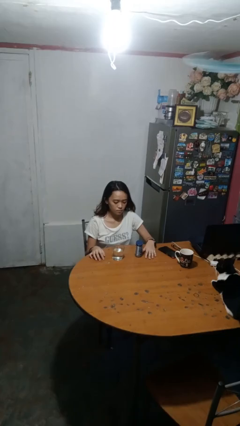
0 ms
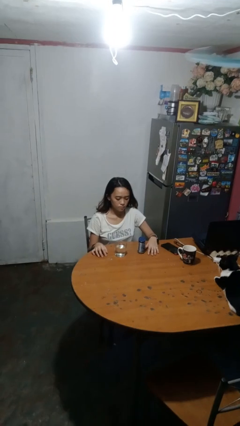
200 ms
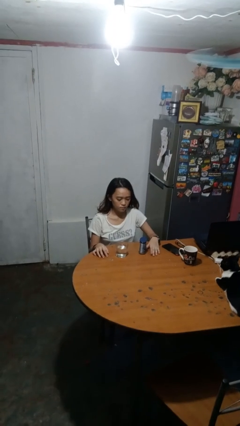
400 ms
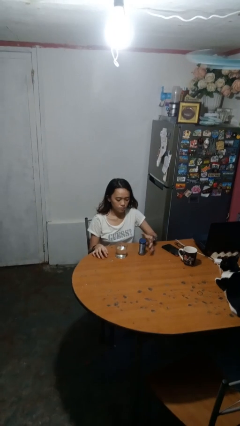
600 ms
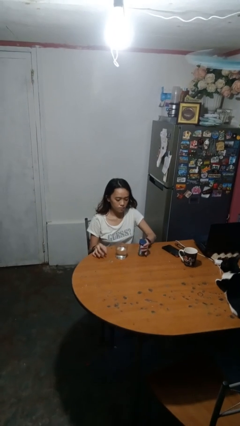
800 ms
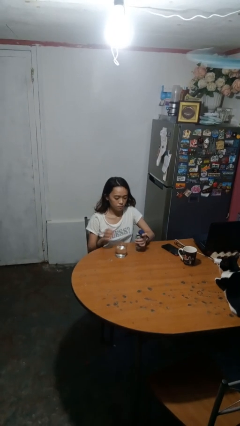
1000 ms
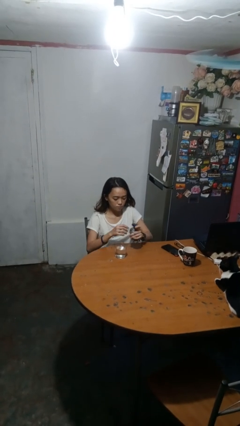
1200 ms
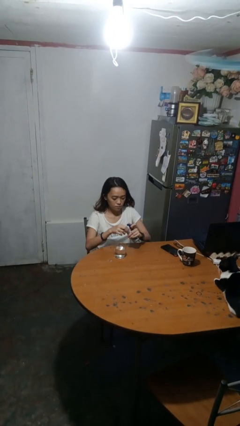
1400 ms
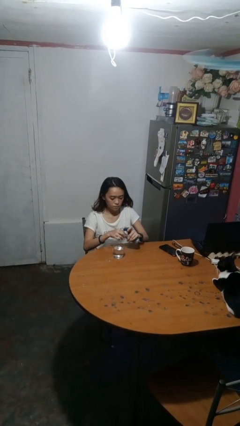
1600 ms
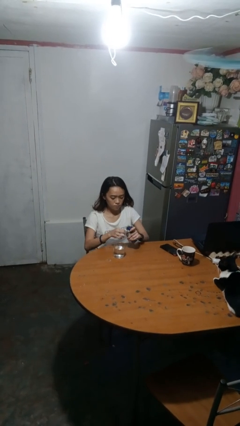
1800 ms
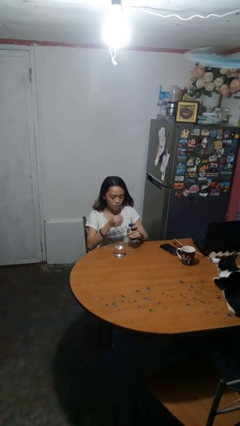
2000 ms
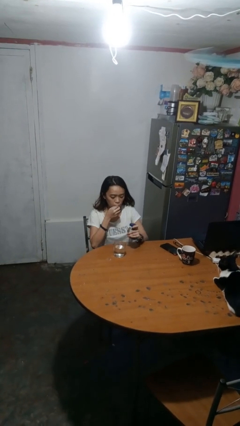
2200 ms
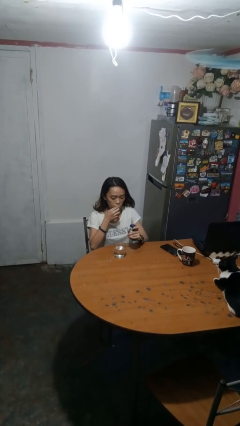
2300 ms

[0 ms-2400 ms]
person takes medicine pills

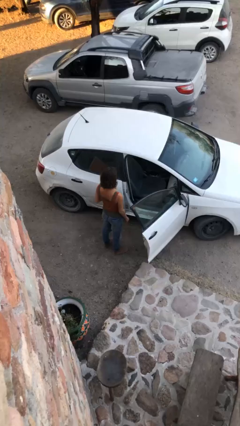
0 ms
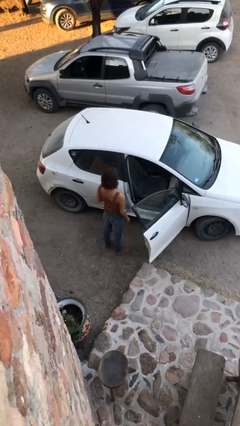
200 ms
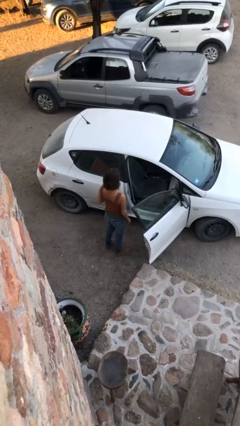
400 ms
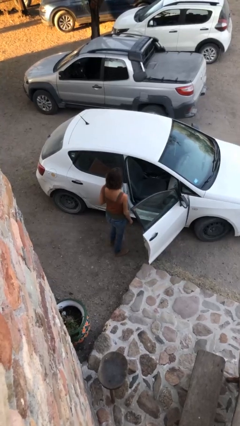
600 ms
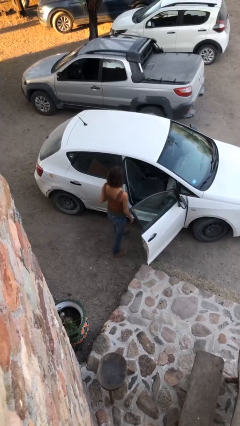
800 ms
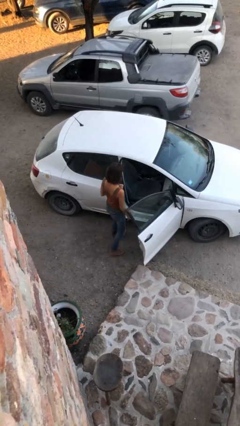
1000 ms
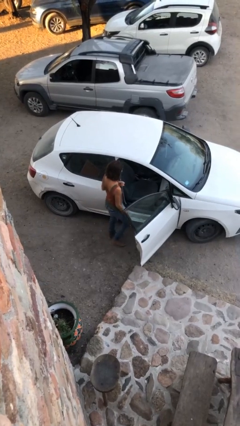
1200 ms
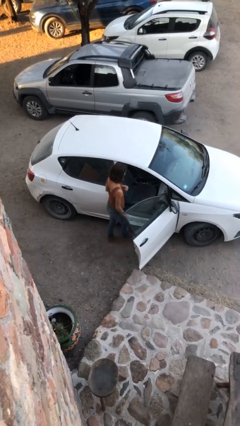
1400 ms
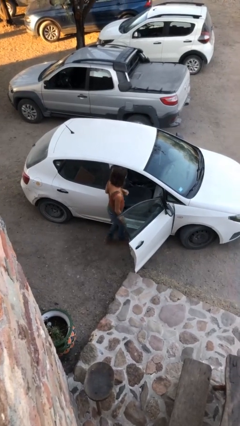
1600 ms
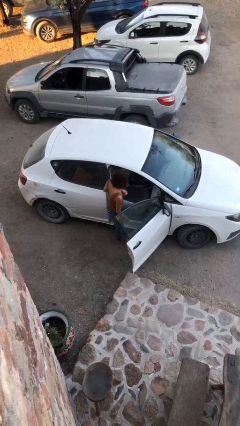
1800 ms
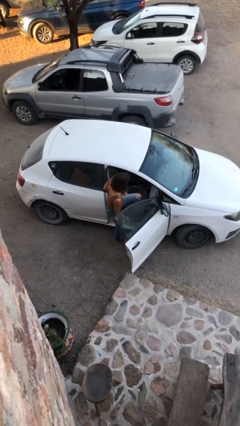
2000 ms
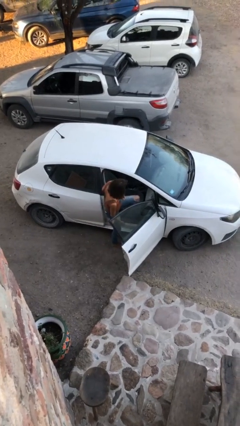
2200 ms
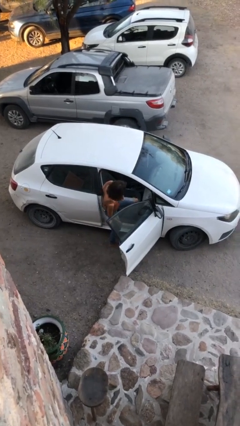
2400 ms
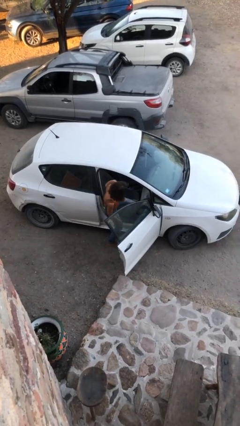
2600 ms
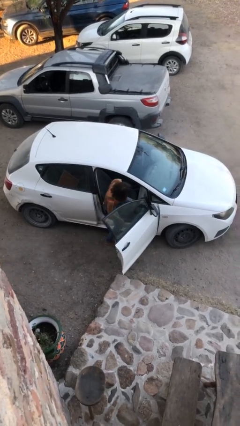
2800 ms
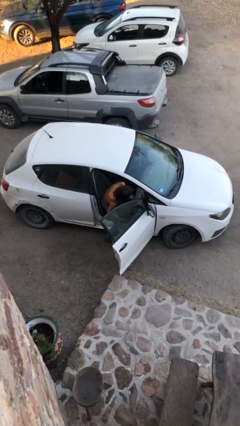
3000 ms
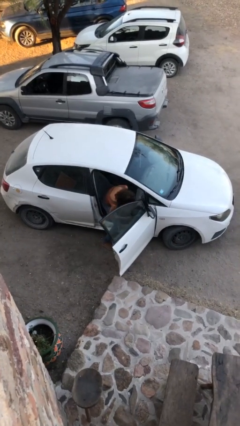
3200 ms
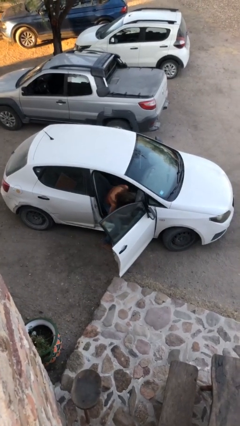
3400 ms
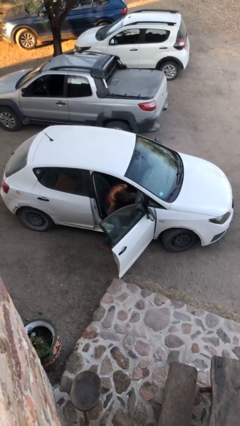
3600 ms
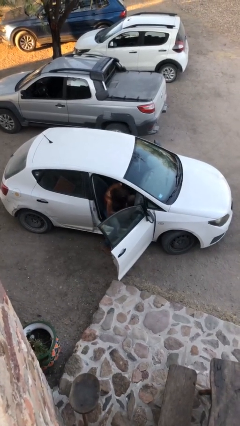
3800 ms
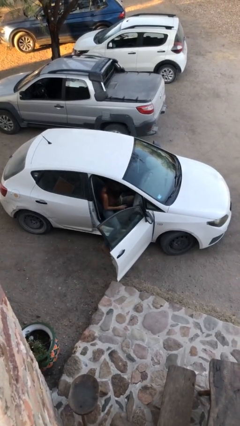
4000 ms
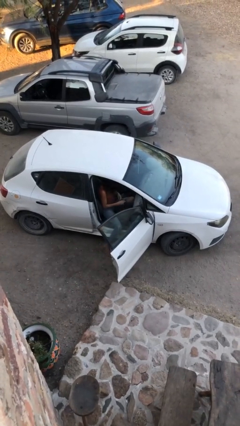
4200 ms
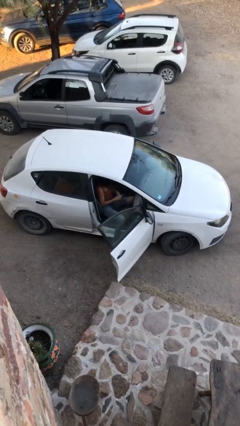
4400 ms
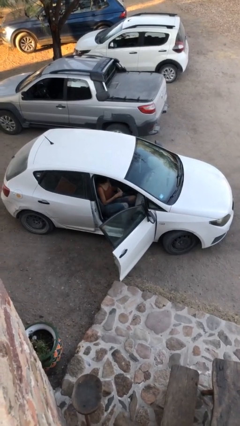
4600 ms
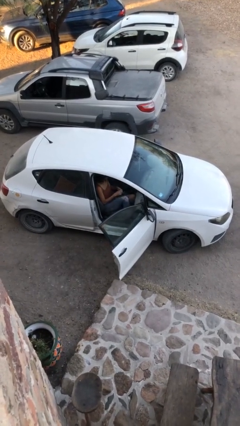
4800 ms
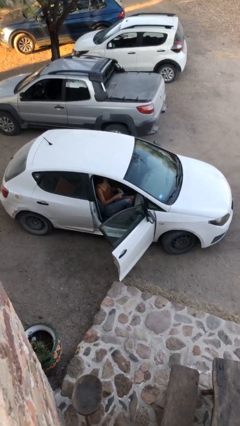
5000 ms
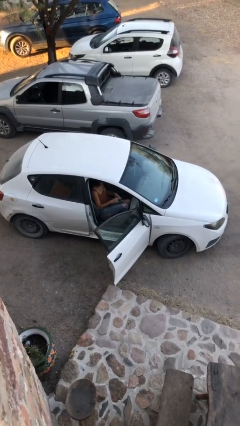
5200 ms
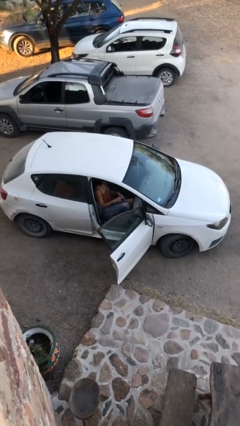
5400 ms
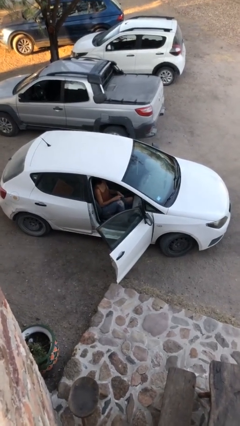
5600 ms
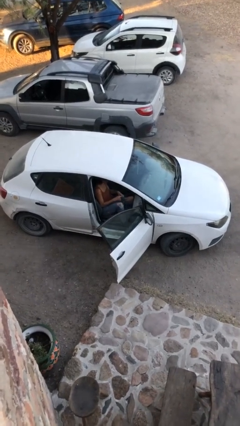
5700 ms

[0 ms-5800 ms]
person enters car

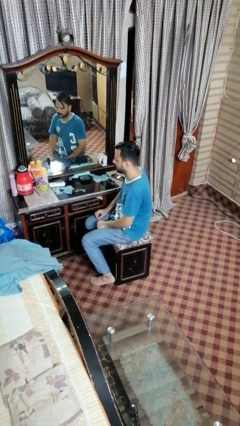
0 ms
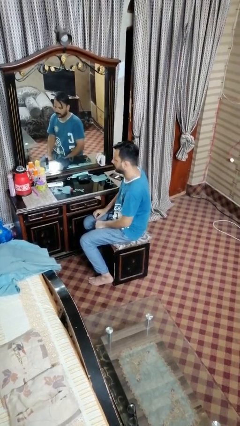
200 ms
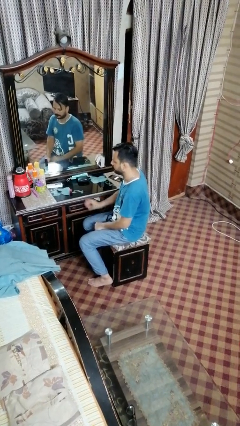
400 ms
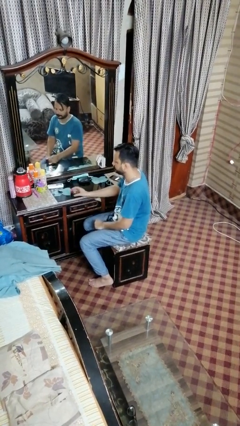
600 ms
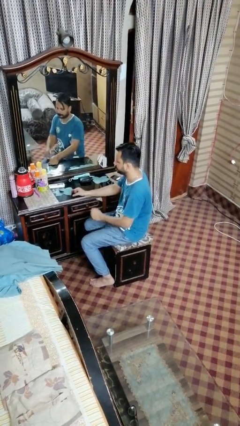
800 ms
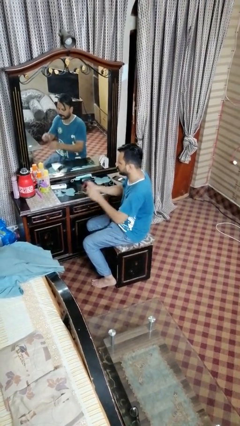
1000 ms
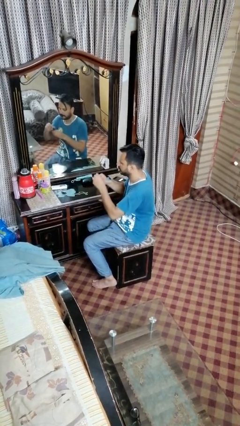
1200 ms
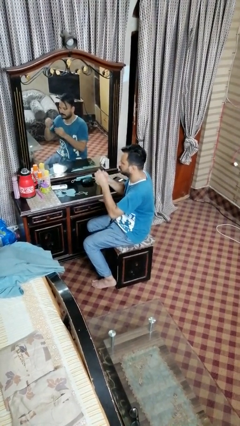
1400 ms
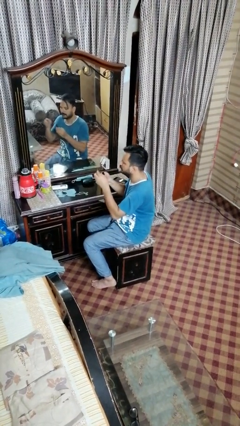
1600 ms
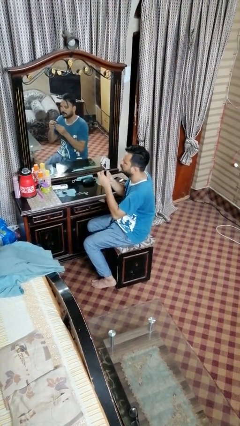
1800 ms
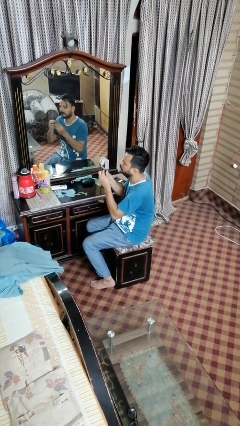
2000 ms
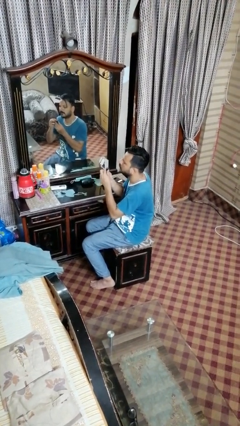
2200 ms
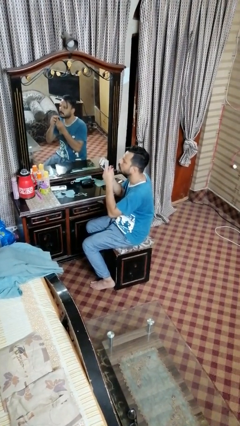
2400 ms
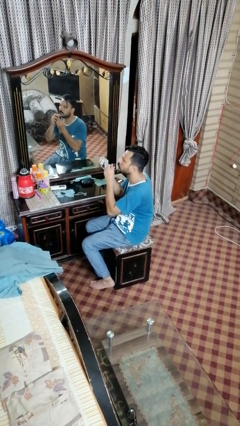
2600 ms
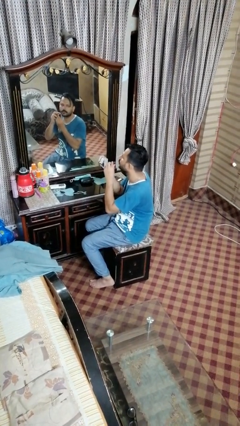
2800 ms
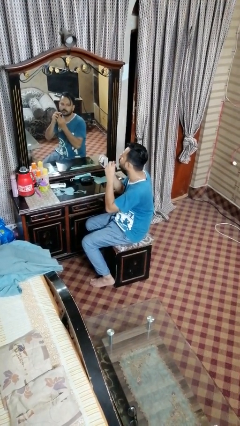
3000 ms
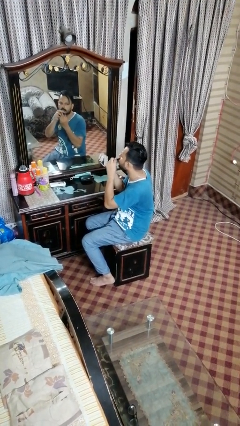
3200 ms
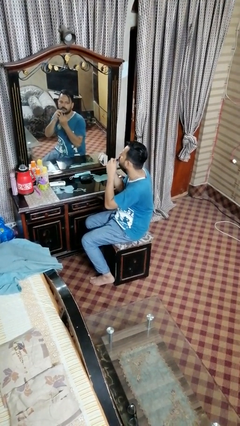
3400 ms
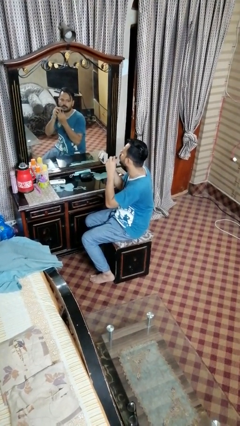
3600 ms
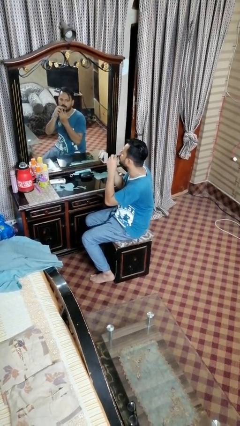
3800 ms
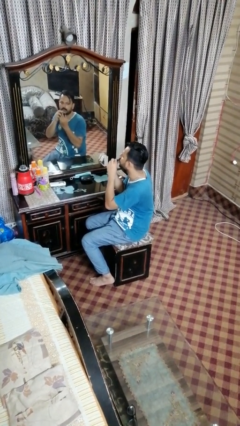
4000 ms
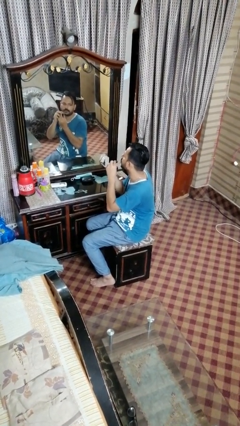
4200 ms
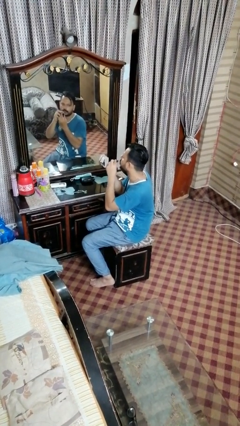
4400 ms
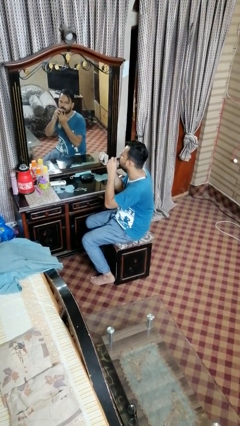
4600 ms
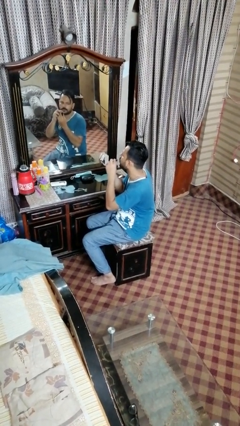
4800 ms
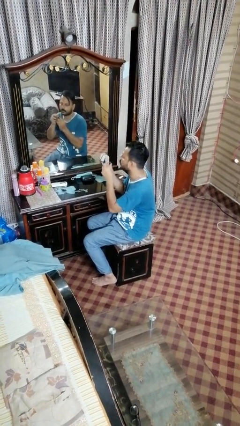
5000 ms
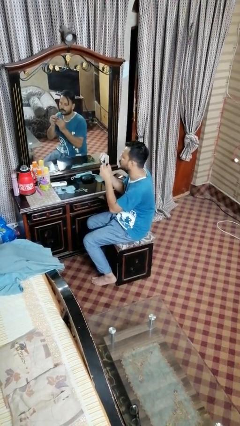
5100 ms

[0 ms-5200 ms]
person applies lip makeup

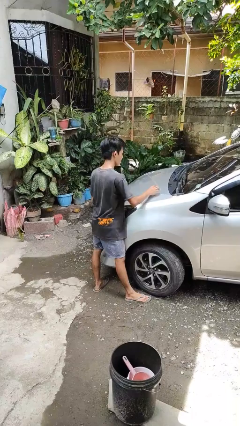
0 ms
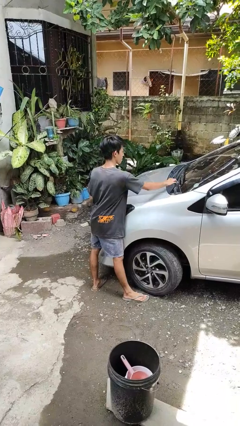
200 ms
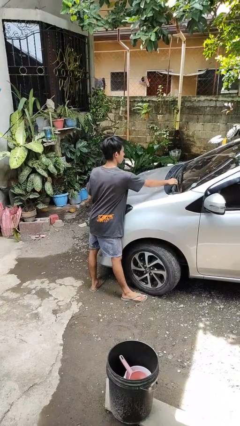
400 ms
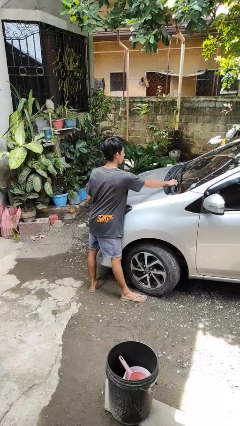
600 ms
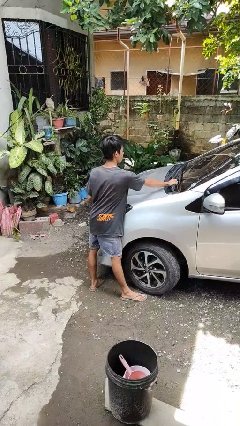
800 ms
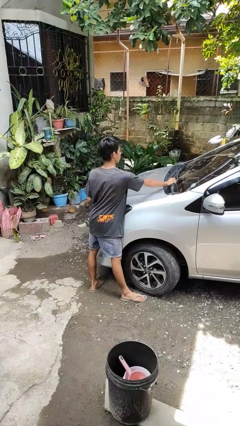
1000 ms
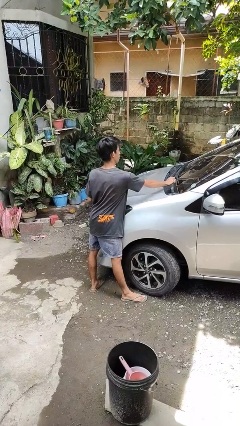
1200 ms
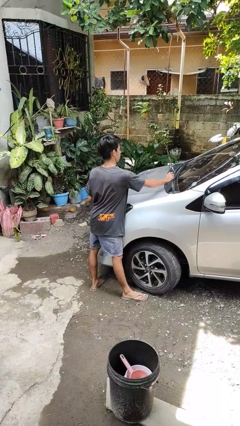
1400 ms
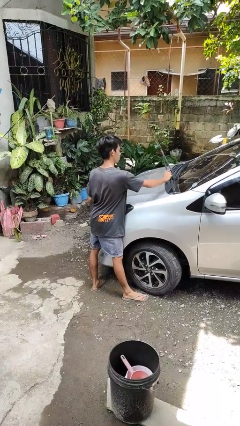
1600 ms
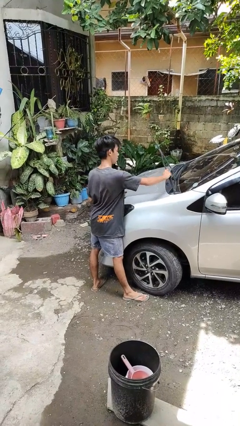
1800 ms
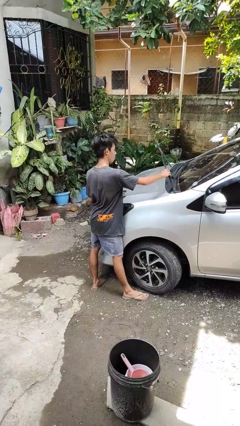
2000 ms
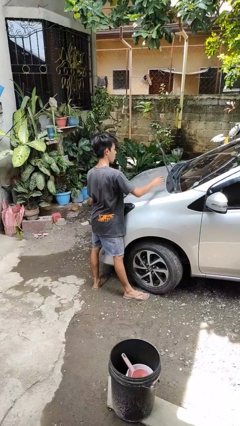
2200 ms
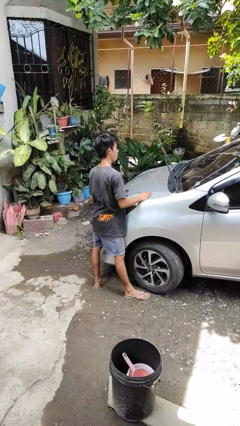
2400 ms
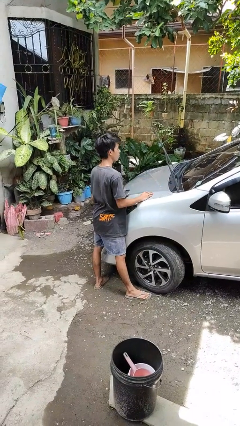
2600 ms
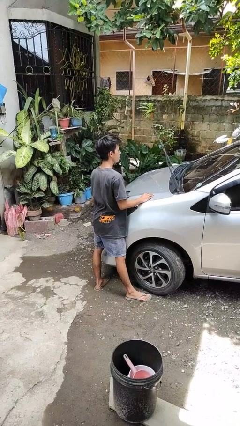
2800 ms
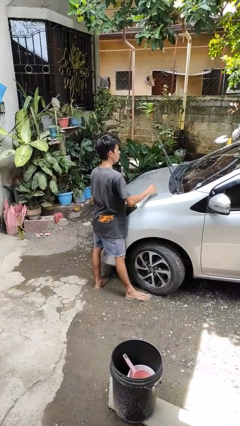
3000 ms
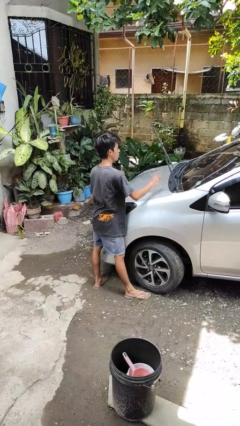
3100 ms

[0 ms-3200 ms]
person flips up car wipers

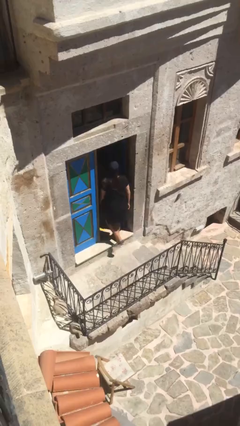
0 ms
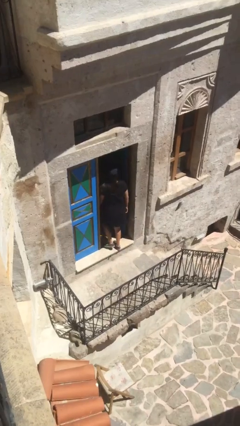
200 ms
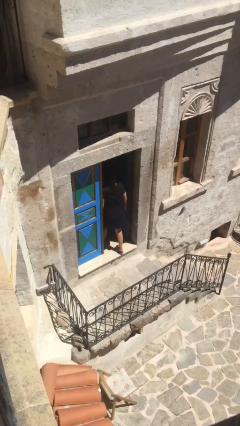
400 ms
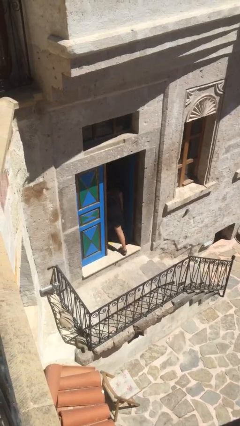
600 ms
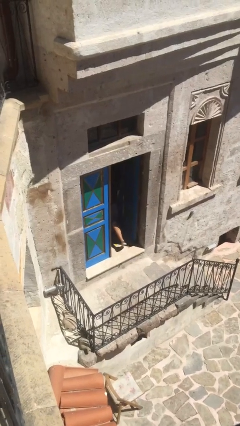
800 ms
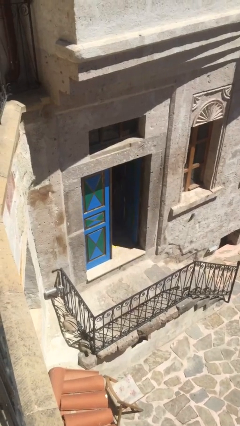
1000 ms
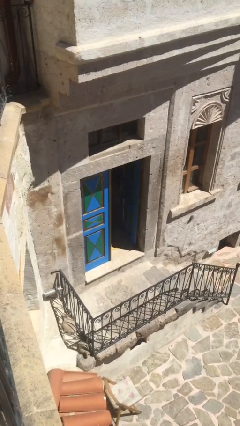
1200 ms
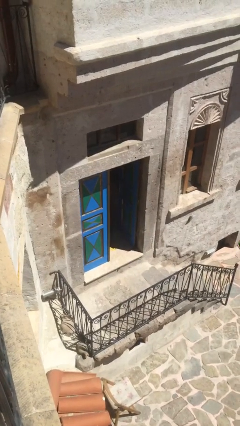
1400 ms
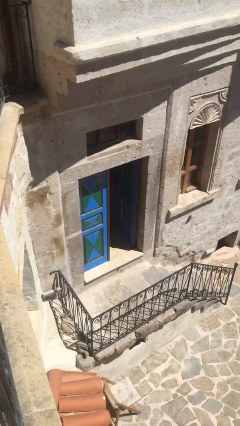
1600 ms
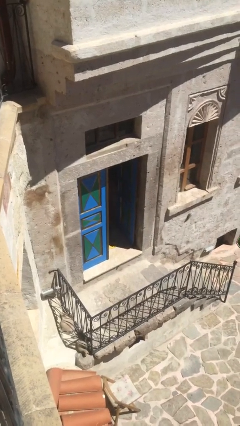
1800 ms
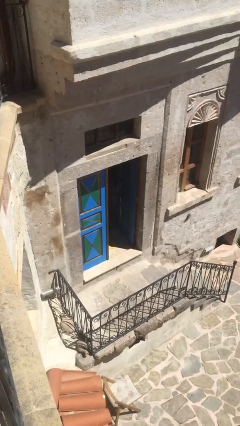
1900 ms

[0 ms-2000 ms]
person exits scene through structure
